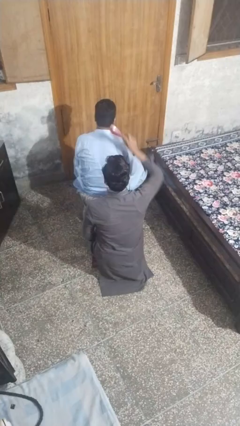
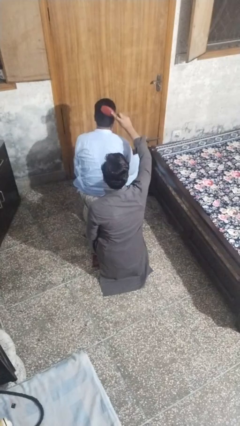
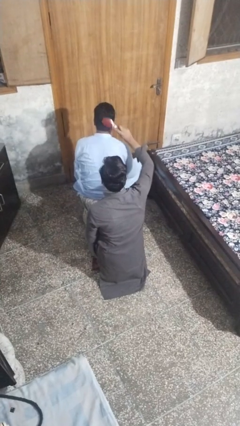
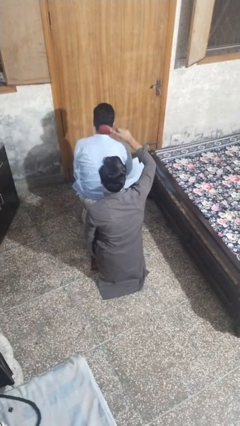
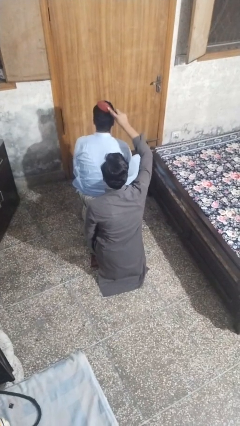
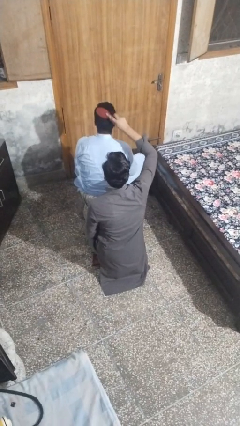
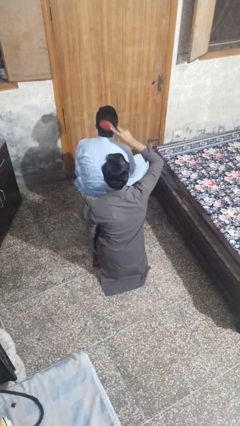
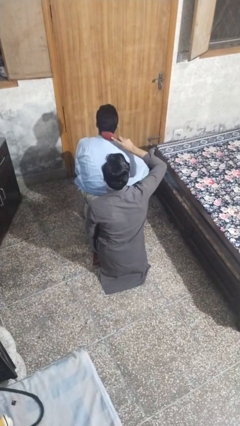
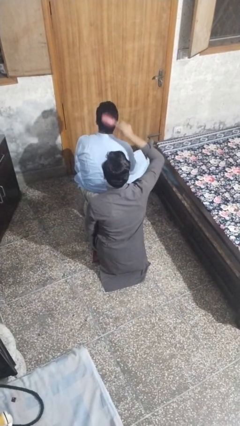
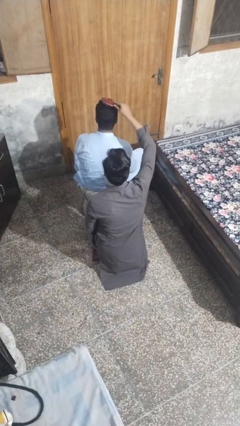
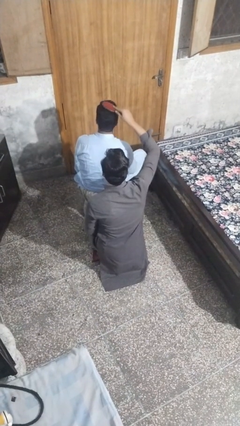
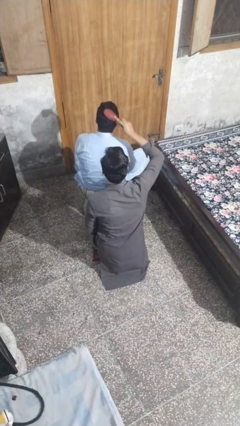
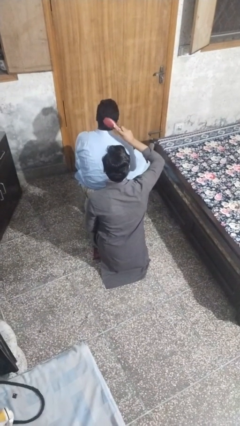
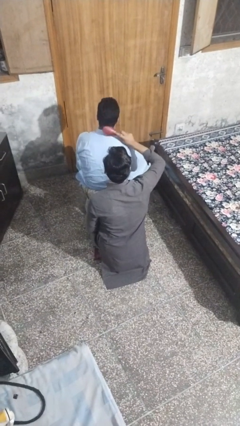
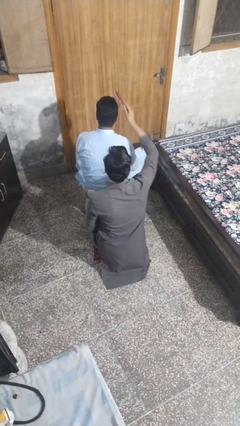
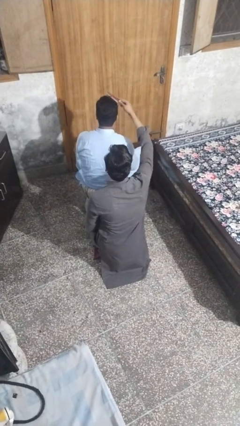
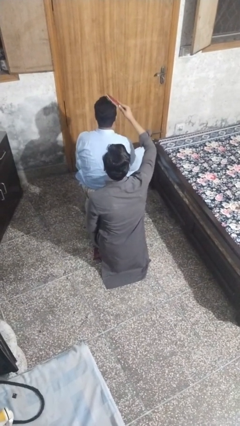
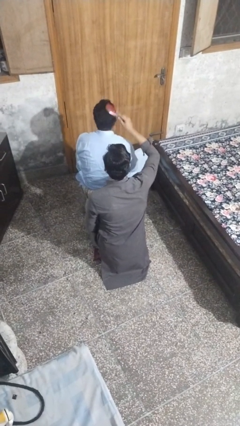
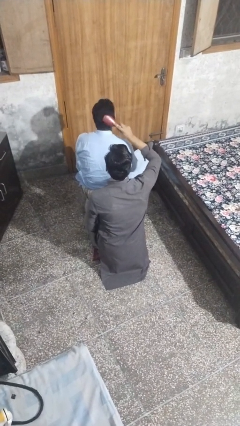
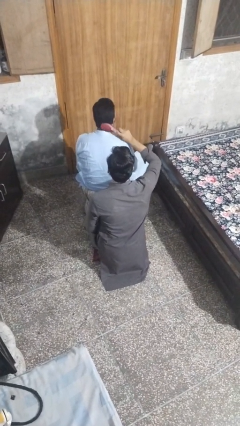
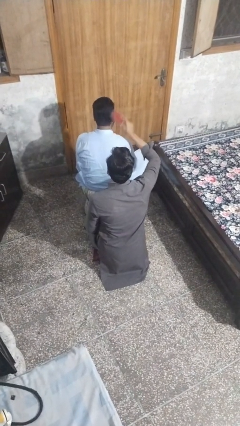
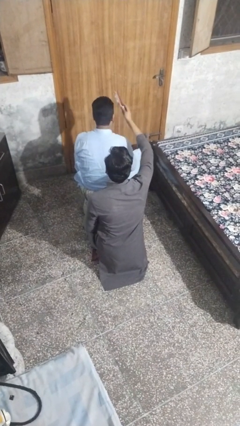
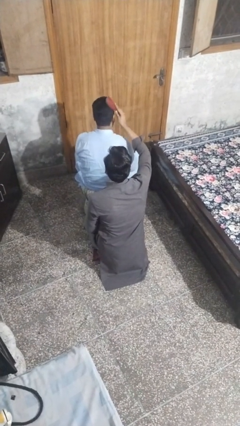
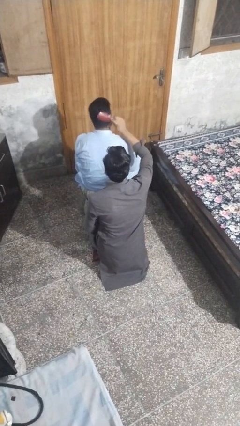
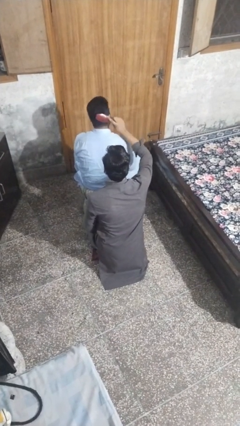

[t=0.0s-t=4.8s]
person brushes hair of person

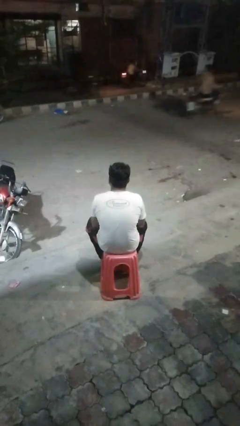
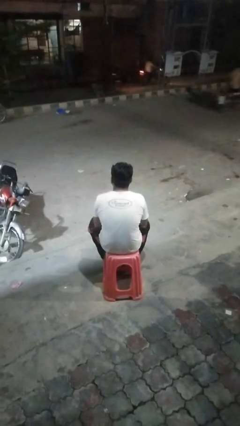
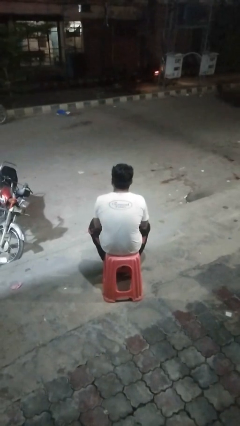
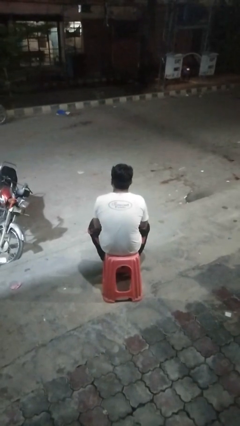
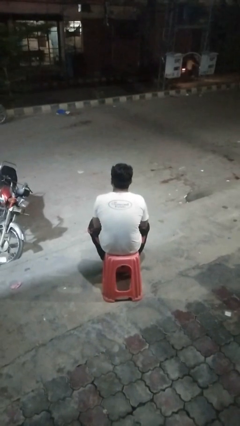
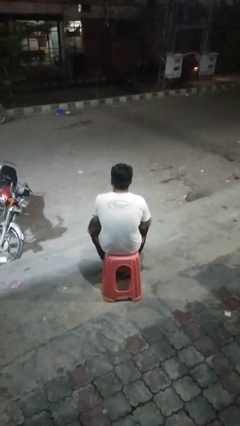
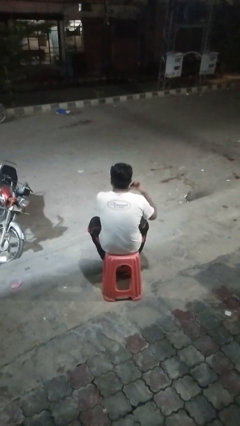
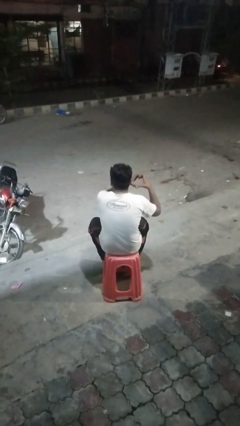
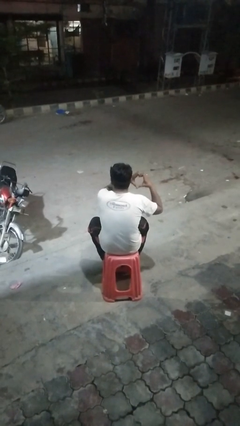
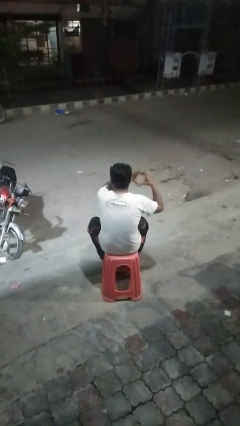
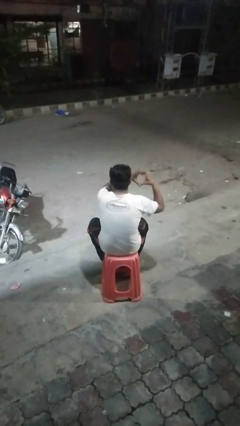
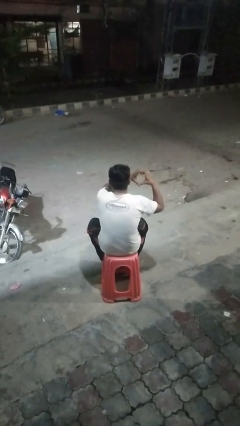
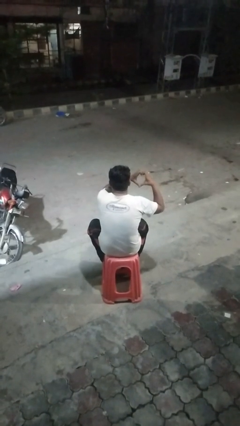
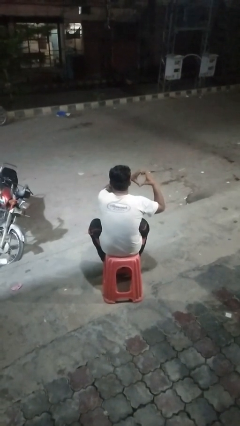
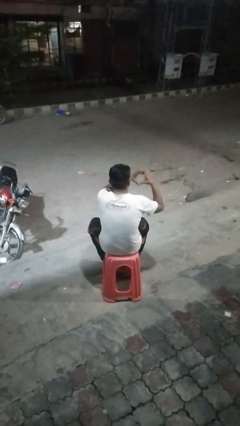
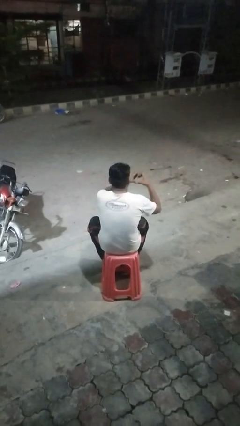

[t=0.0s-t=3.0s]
person gestures heart

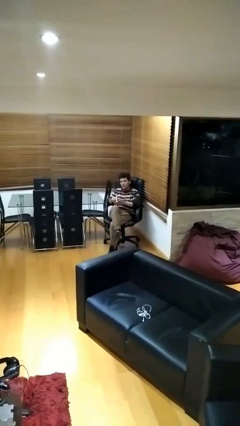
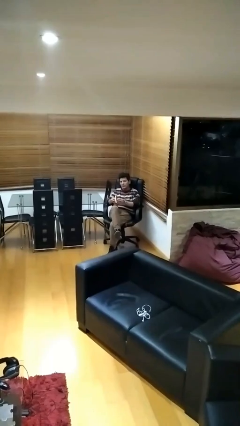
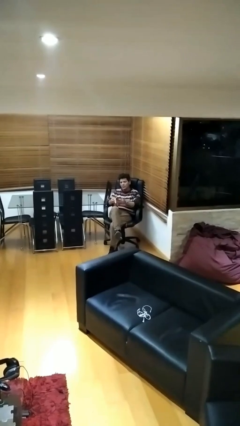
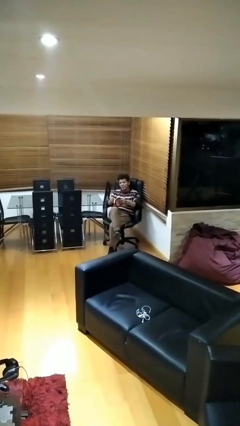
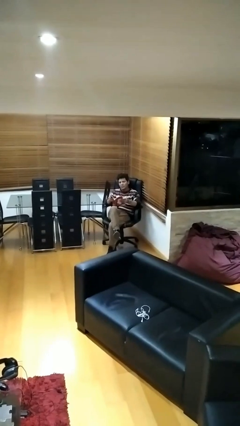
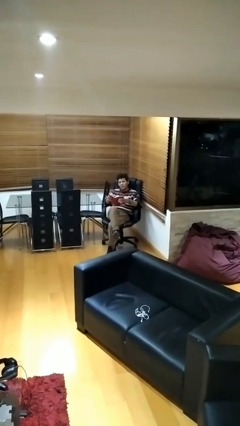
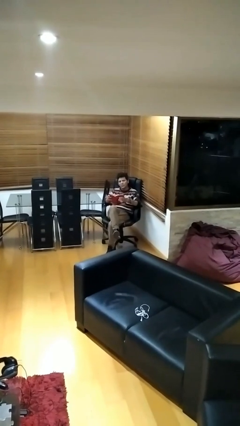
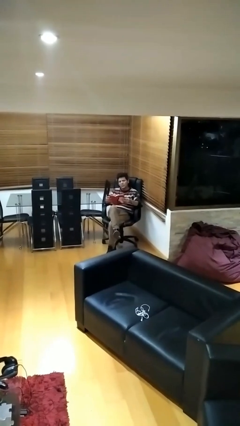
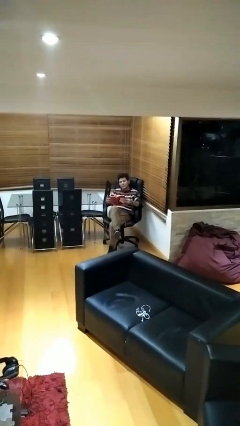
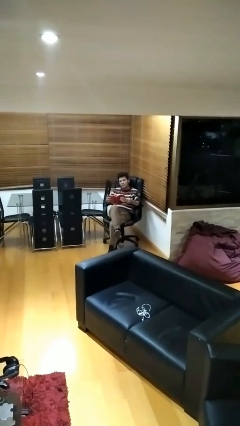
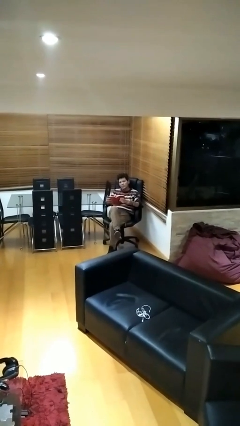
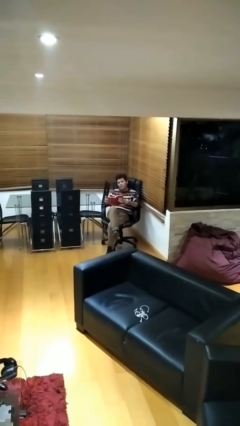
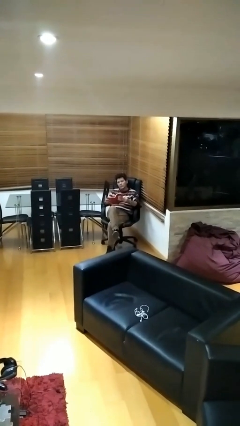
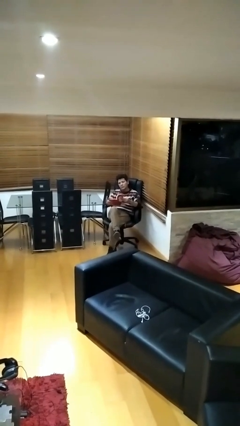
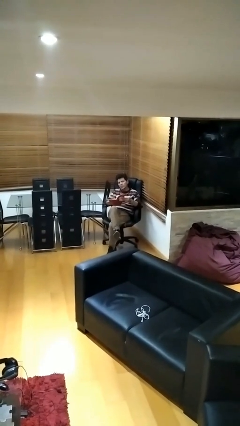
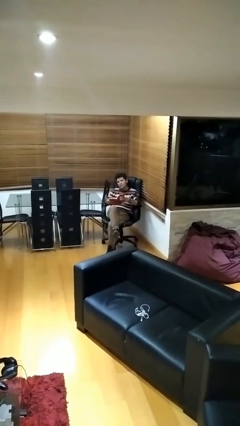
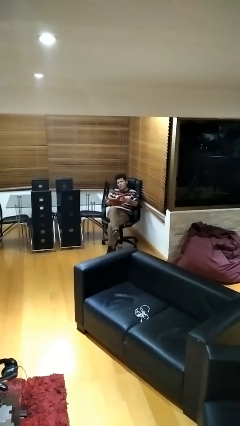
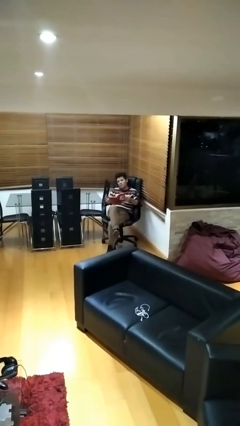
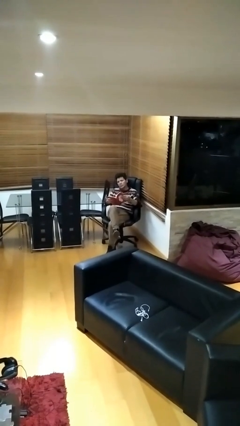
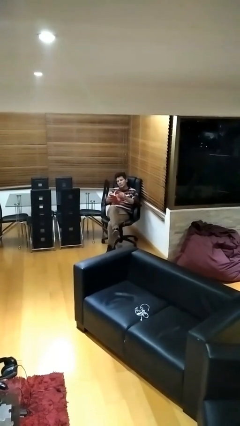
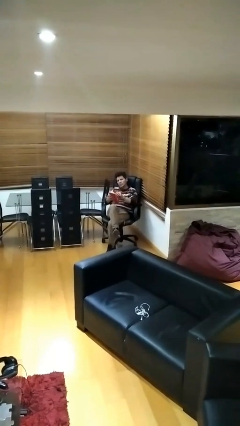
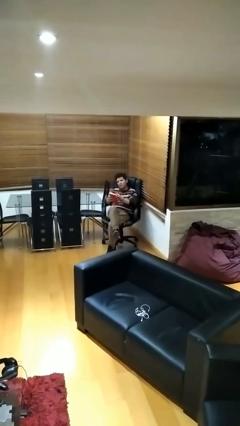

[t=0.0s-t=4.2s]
person reads document

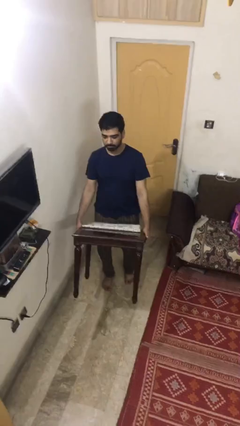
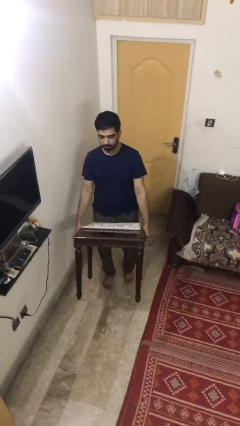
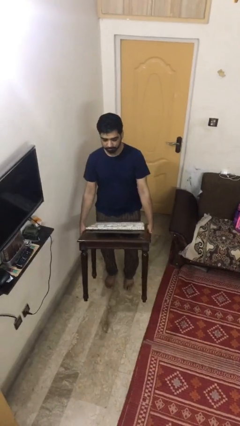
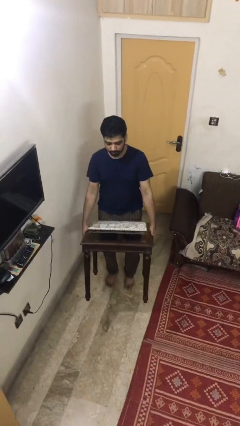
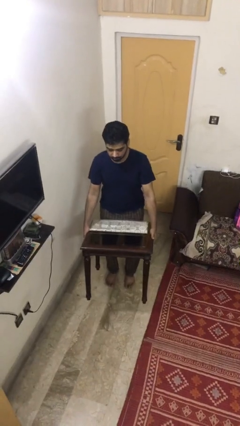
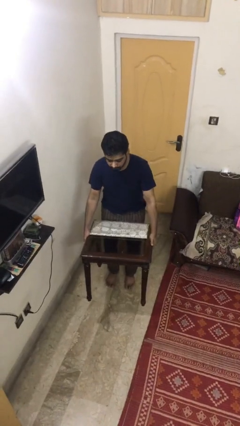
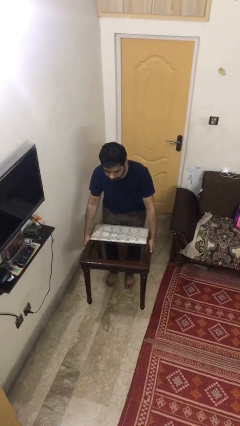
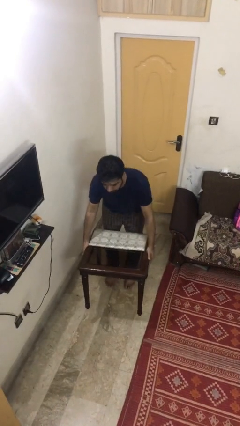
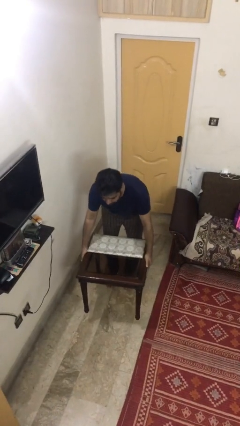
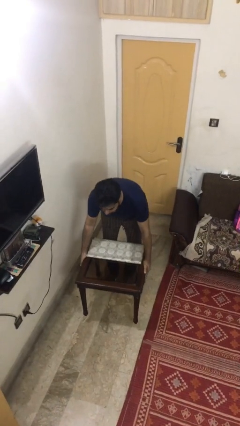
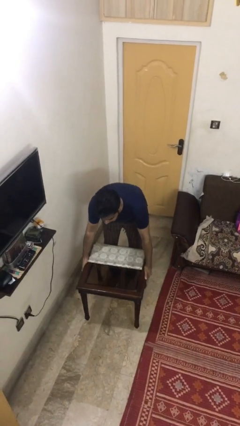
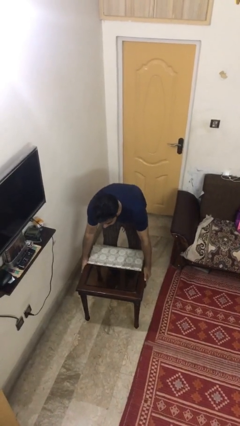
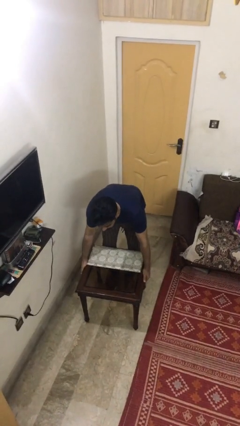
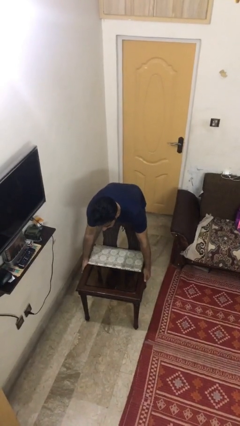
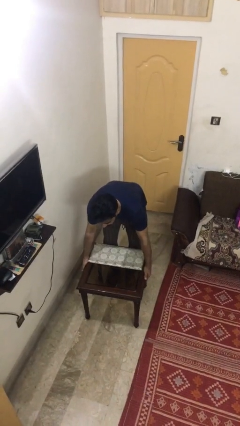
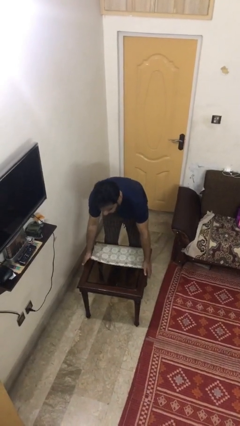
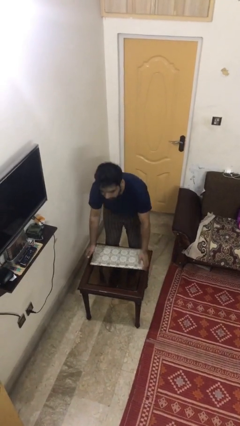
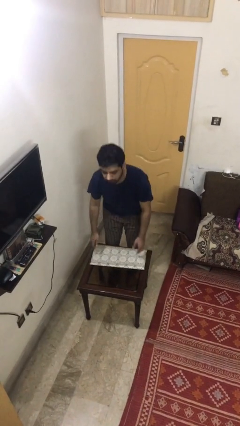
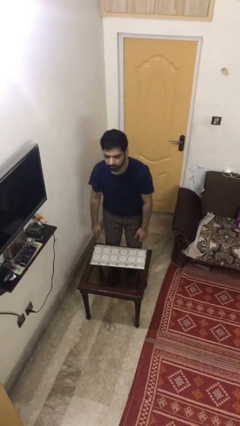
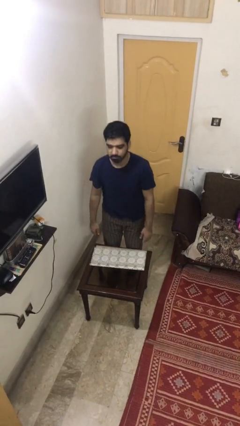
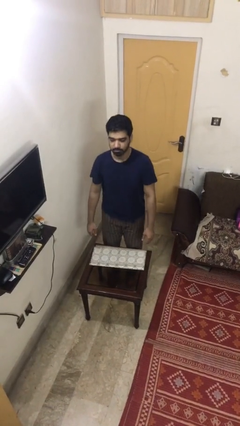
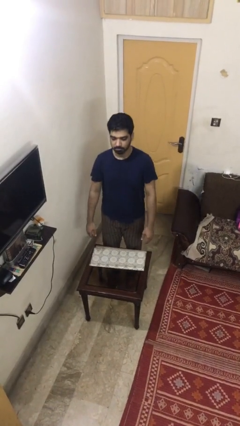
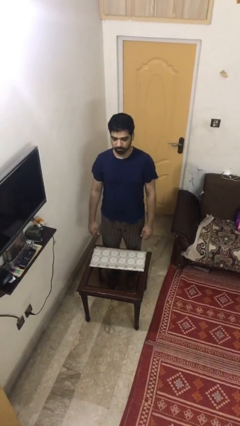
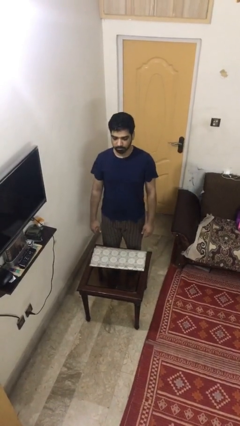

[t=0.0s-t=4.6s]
person puts down object on floor

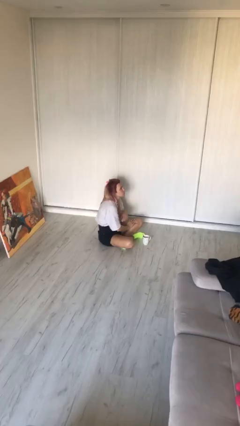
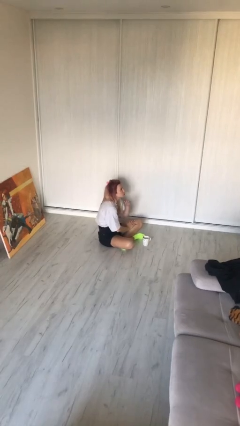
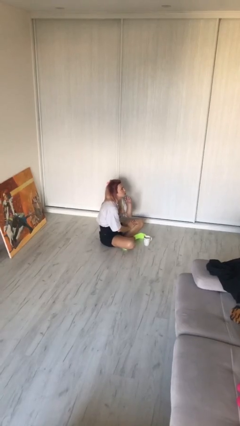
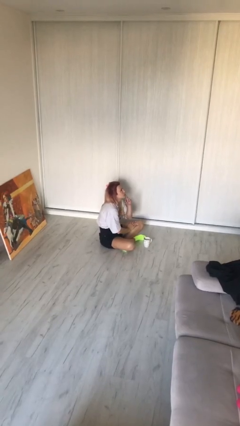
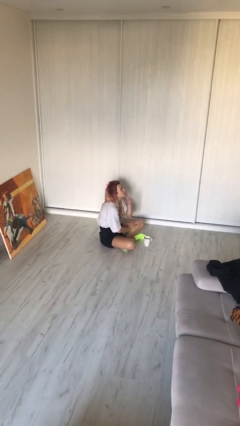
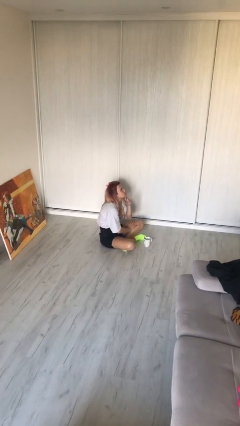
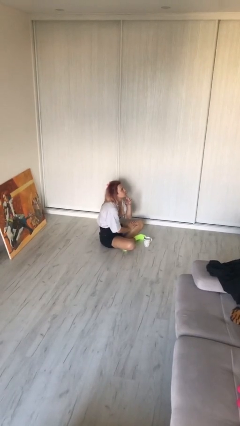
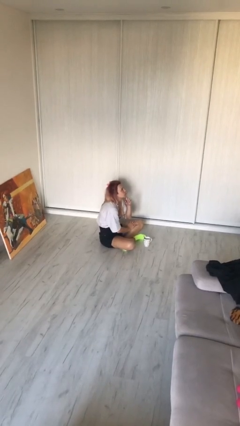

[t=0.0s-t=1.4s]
person strokes chin
